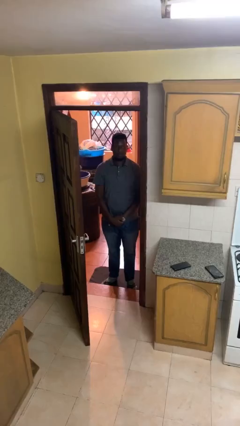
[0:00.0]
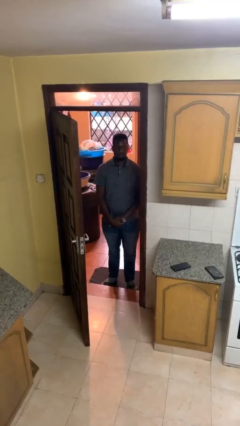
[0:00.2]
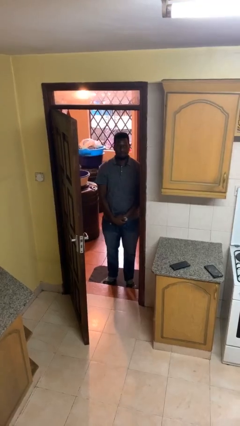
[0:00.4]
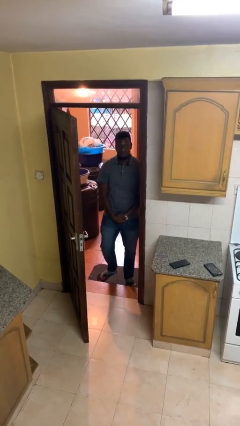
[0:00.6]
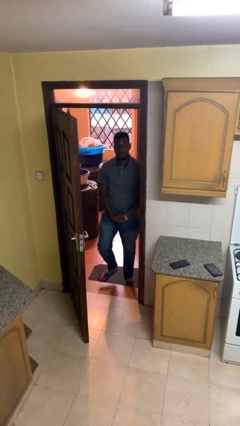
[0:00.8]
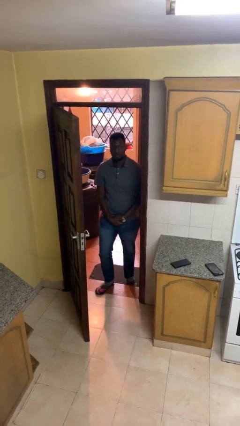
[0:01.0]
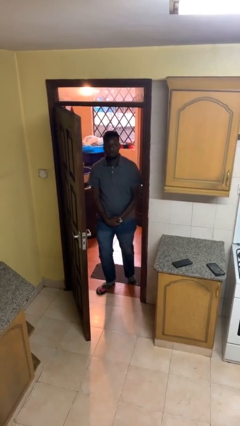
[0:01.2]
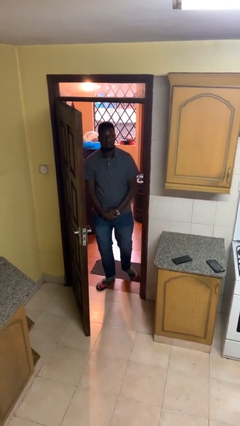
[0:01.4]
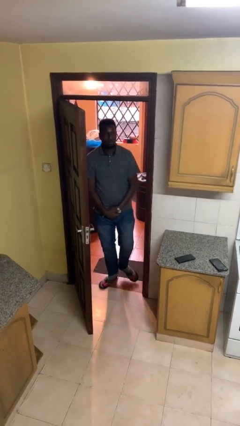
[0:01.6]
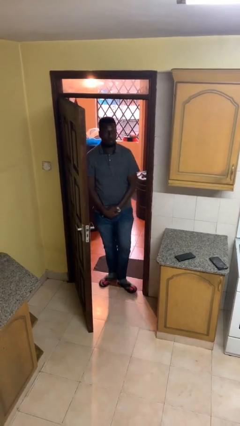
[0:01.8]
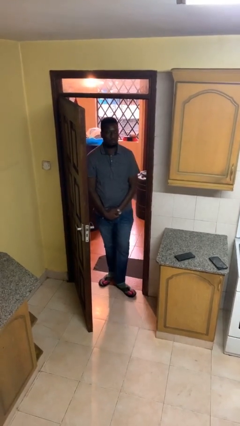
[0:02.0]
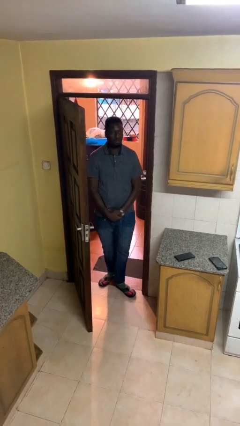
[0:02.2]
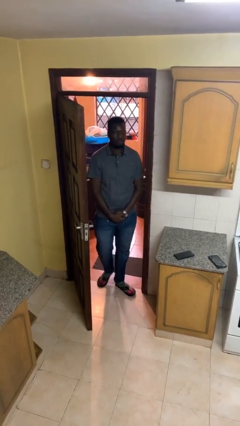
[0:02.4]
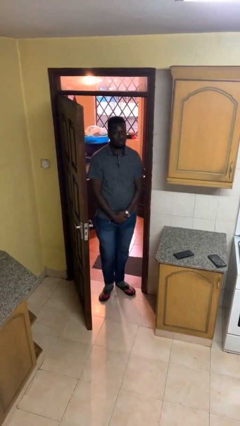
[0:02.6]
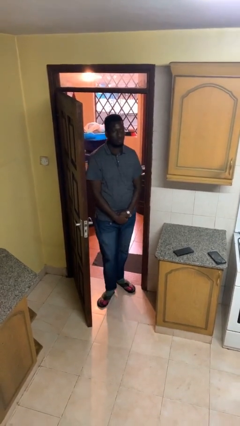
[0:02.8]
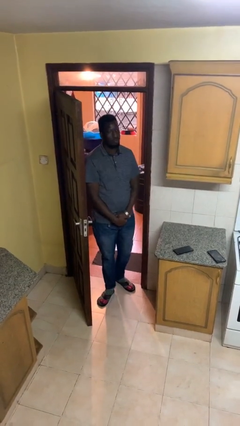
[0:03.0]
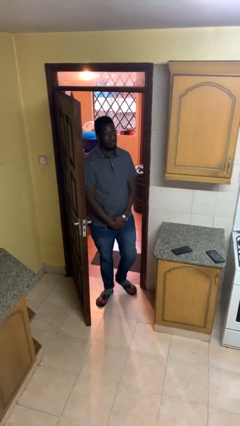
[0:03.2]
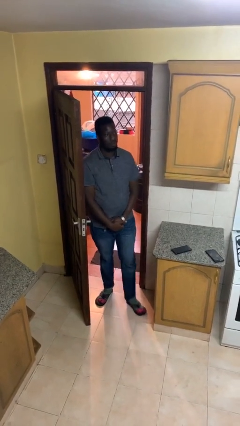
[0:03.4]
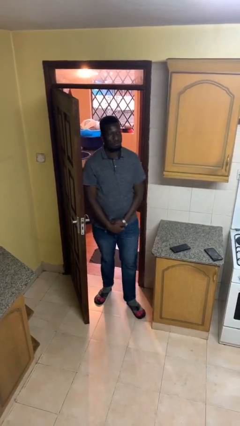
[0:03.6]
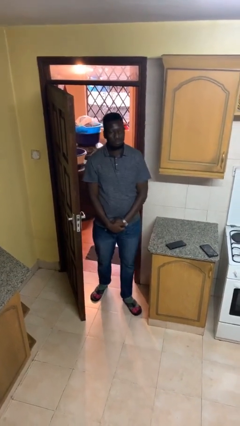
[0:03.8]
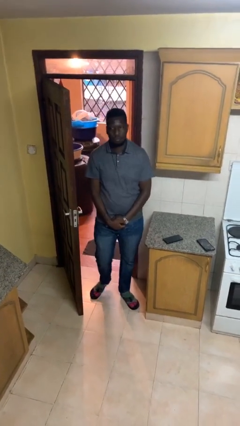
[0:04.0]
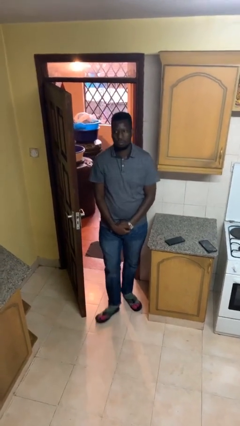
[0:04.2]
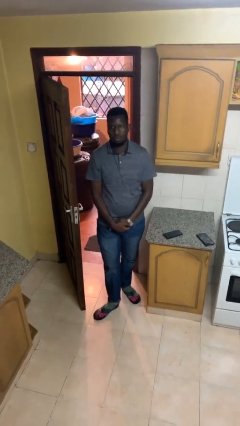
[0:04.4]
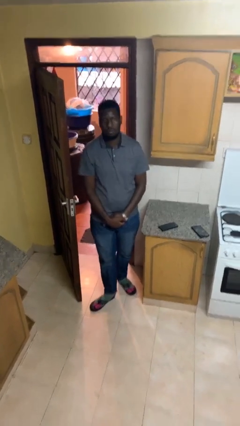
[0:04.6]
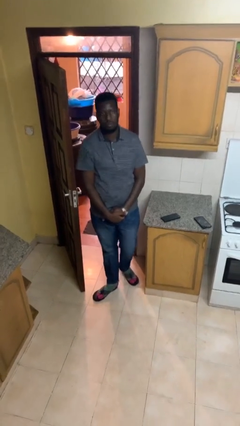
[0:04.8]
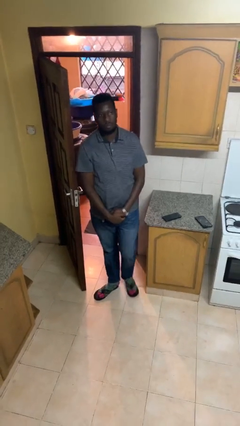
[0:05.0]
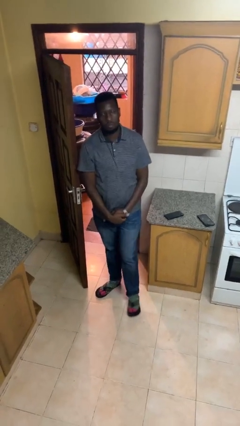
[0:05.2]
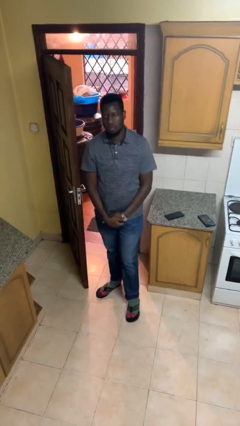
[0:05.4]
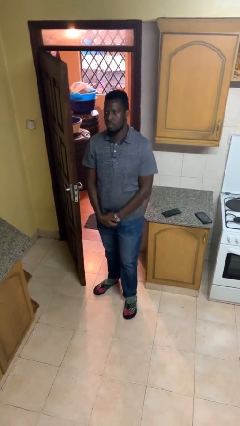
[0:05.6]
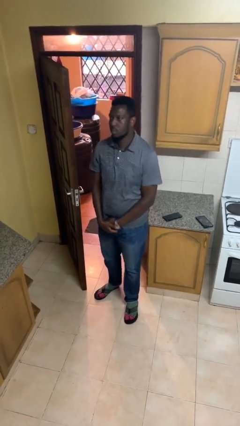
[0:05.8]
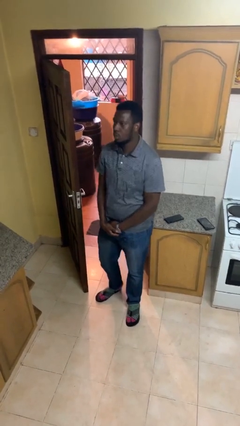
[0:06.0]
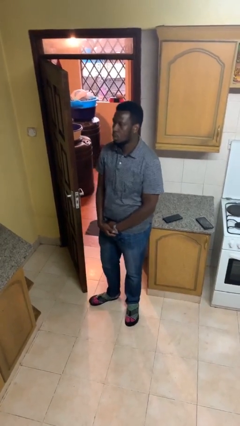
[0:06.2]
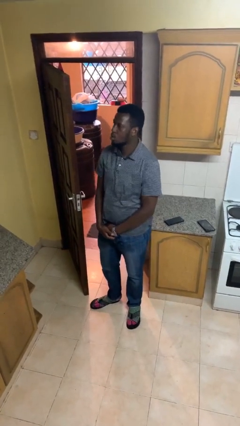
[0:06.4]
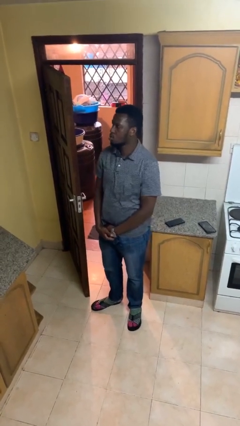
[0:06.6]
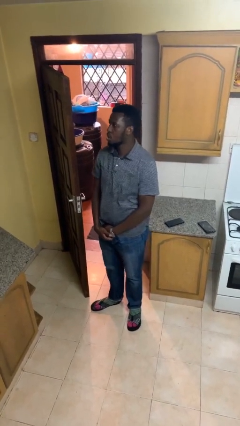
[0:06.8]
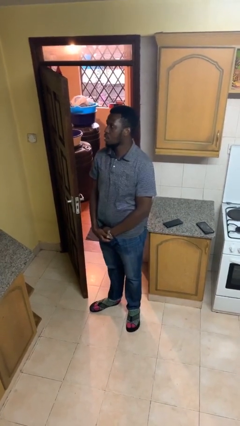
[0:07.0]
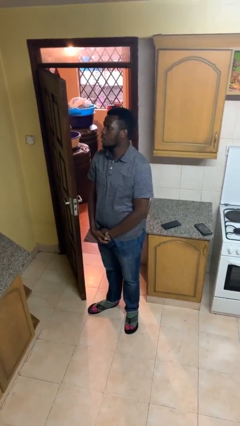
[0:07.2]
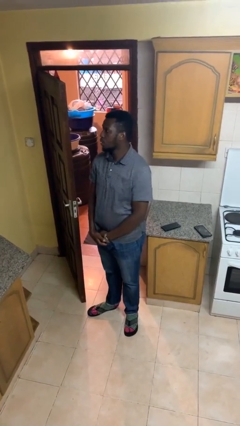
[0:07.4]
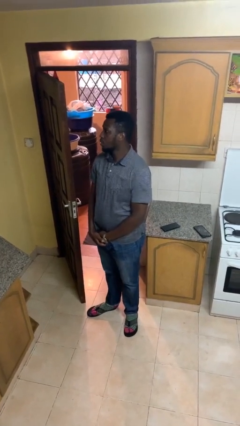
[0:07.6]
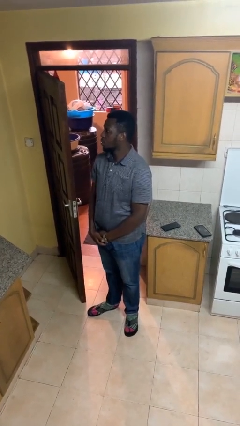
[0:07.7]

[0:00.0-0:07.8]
person enters scene through structure

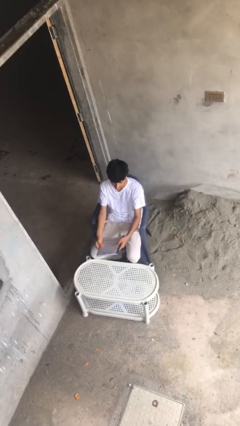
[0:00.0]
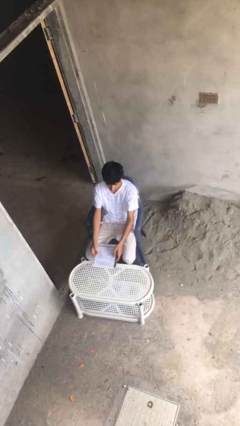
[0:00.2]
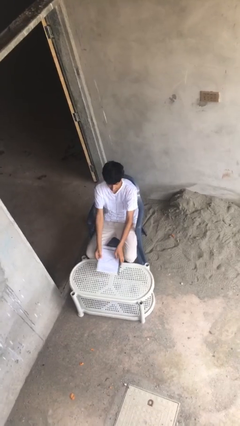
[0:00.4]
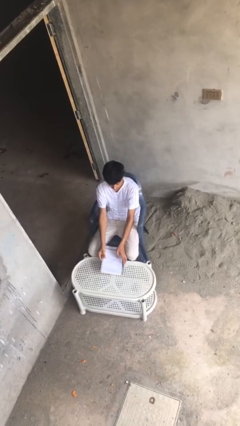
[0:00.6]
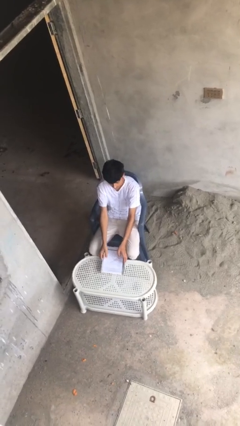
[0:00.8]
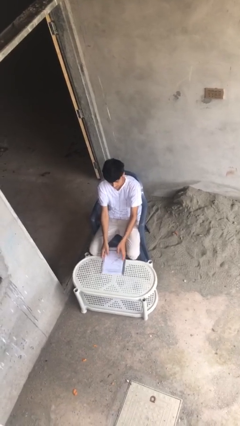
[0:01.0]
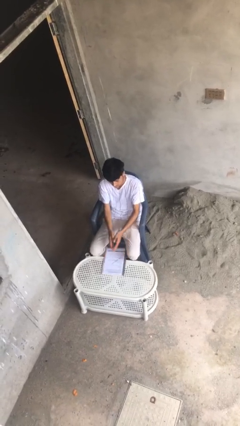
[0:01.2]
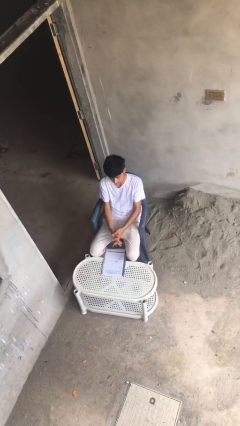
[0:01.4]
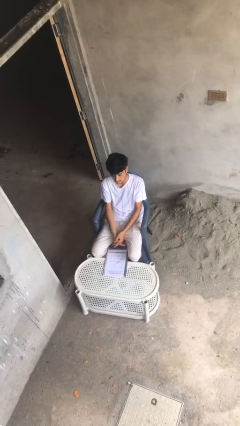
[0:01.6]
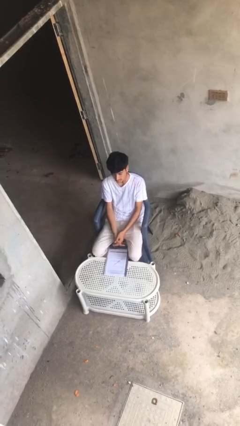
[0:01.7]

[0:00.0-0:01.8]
person puts down object on table

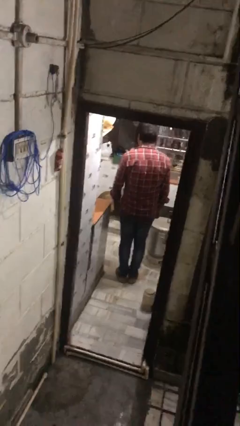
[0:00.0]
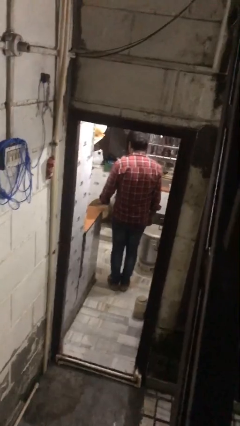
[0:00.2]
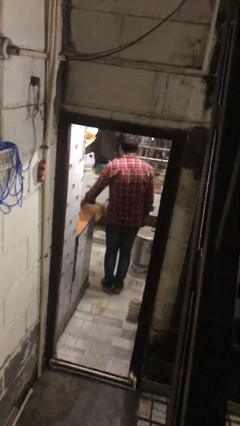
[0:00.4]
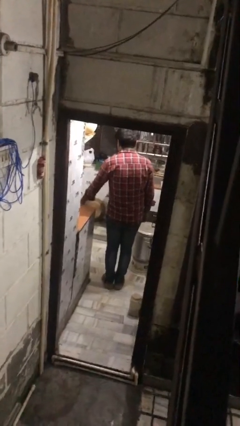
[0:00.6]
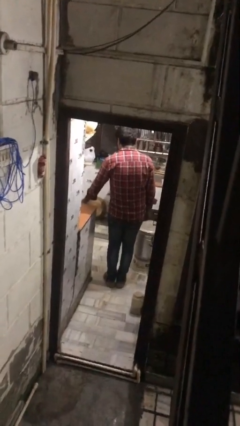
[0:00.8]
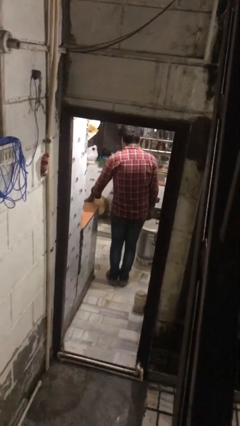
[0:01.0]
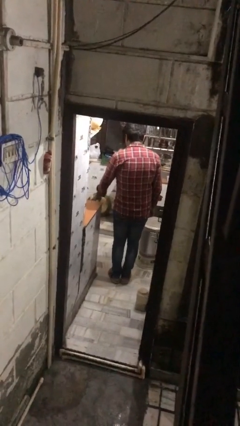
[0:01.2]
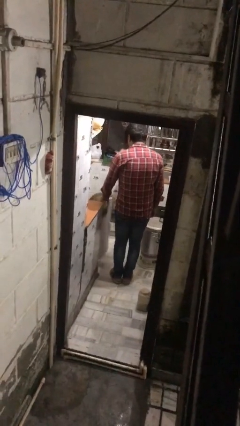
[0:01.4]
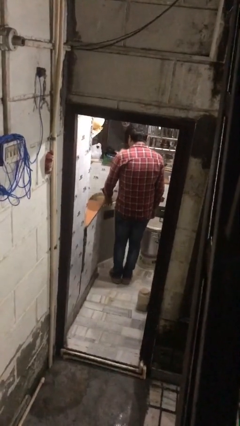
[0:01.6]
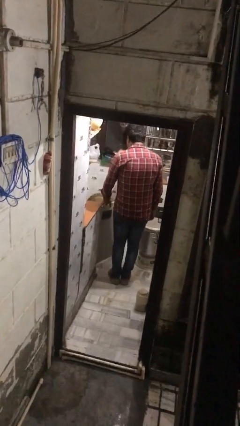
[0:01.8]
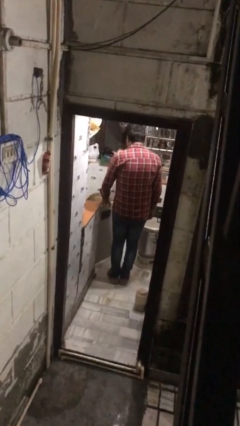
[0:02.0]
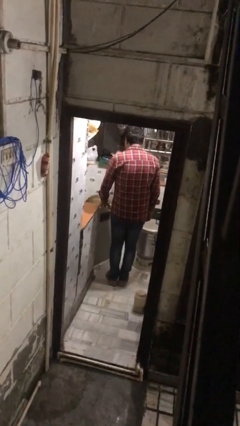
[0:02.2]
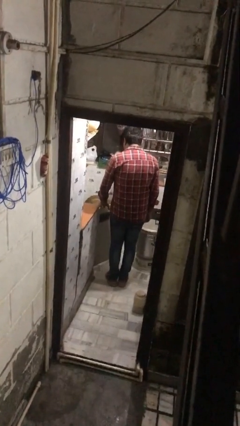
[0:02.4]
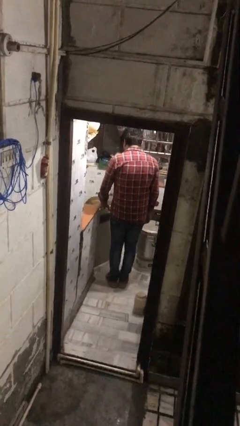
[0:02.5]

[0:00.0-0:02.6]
person opens kitchen drawer

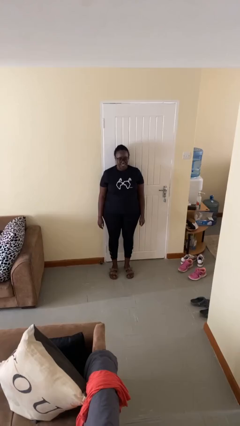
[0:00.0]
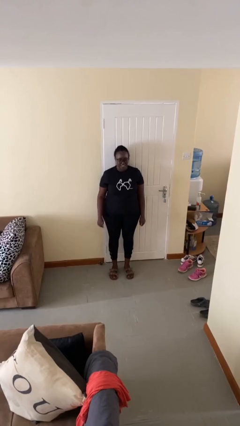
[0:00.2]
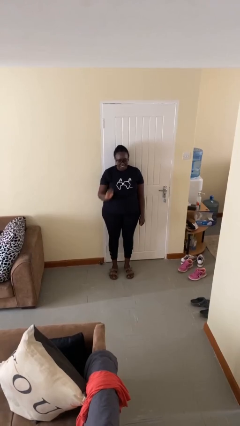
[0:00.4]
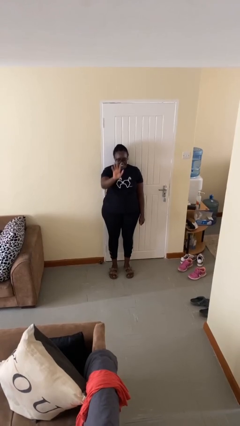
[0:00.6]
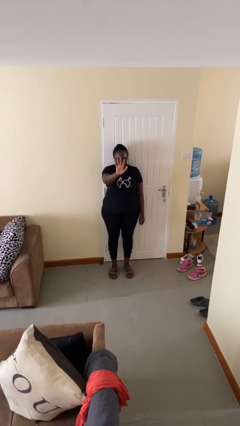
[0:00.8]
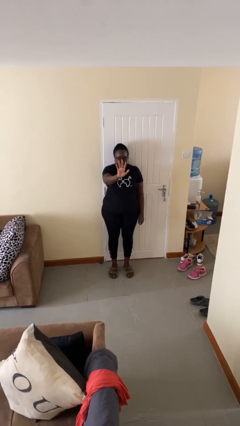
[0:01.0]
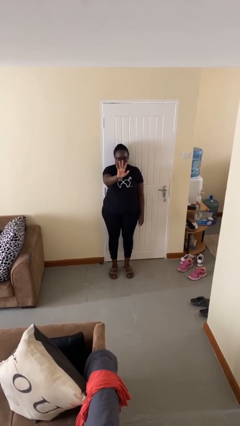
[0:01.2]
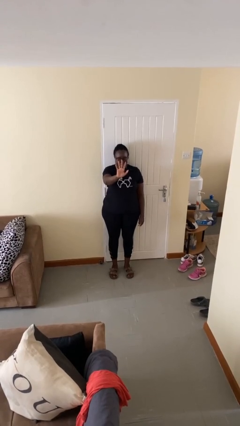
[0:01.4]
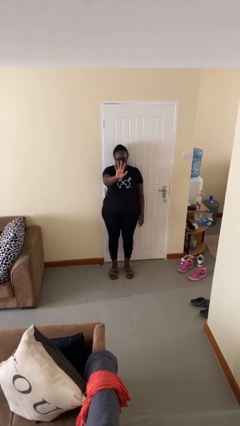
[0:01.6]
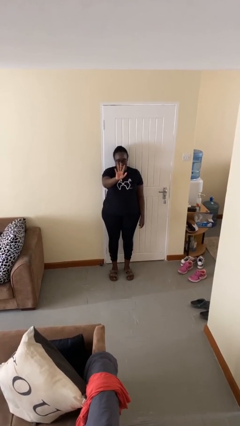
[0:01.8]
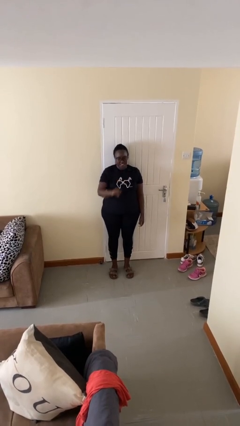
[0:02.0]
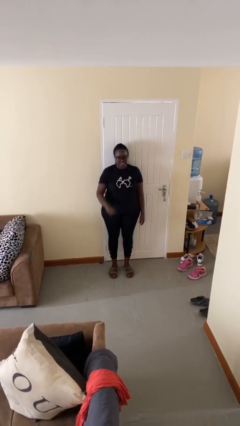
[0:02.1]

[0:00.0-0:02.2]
person gestures number five

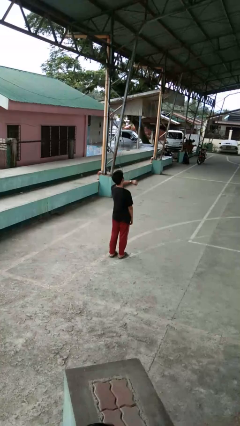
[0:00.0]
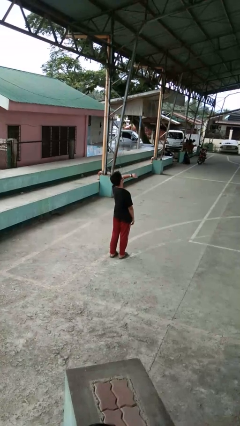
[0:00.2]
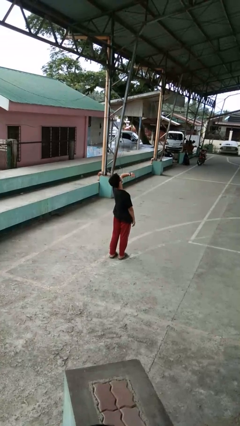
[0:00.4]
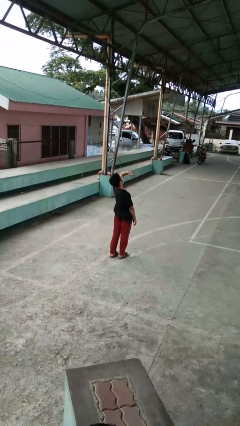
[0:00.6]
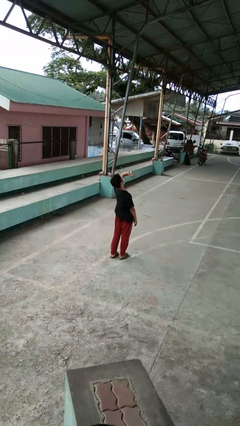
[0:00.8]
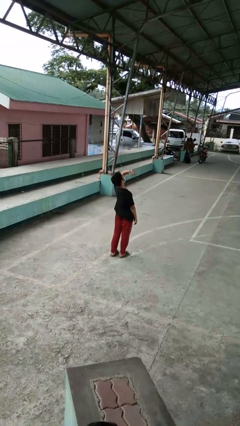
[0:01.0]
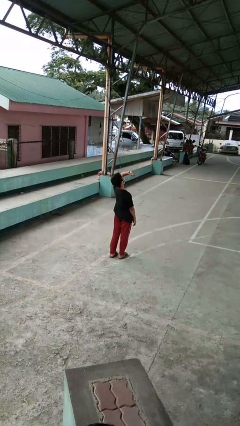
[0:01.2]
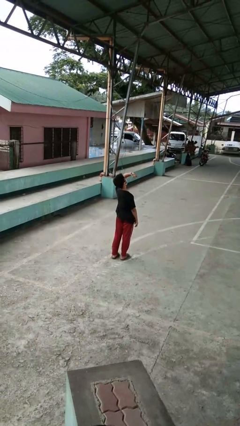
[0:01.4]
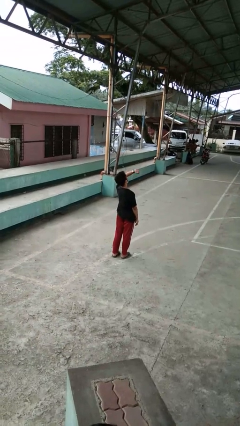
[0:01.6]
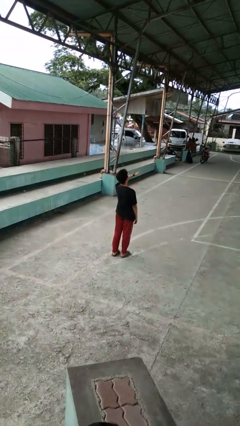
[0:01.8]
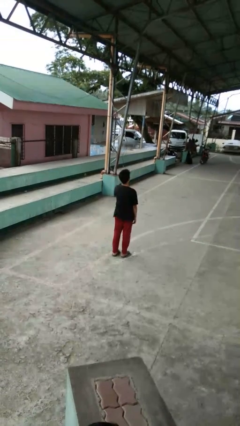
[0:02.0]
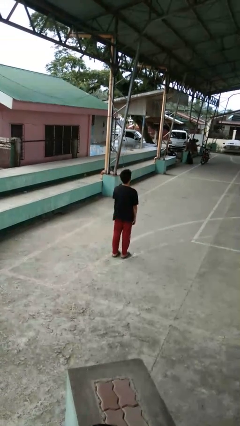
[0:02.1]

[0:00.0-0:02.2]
person looks at wristwatch

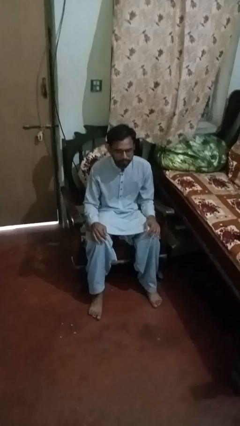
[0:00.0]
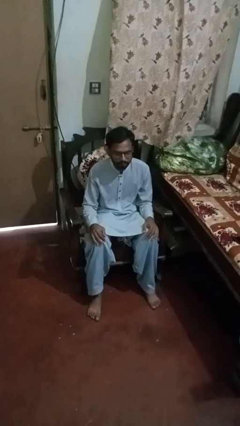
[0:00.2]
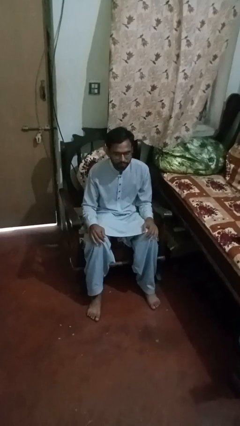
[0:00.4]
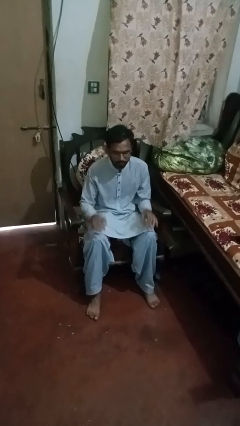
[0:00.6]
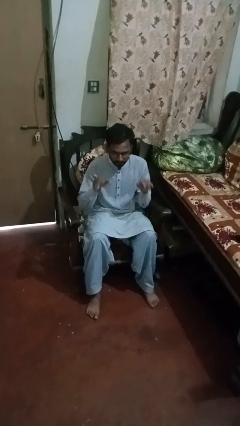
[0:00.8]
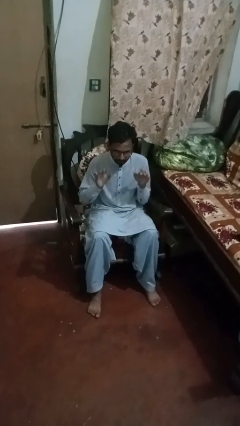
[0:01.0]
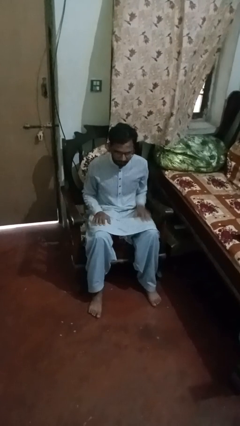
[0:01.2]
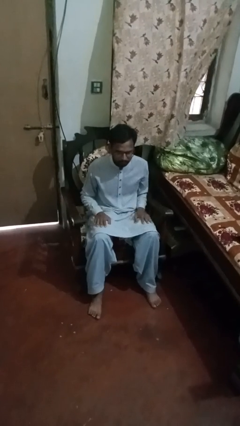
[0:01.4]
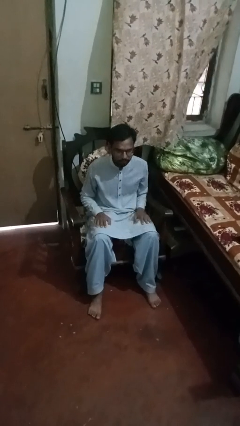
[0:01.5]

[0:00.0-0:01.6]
person slaps hands on thighs
